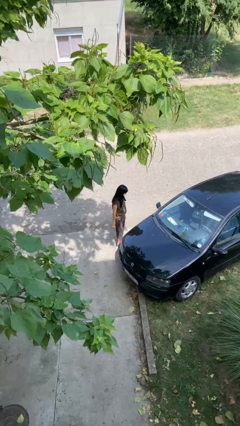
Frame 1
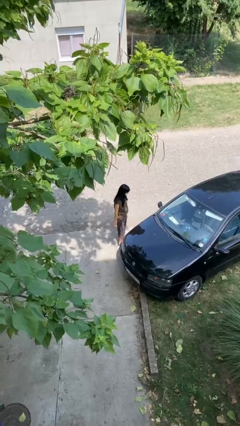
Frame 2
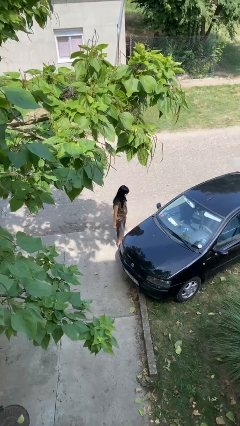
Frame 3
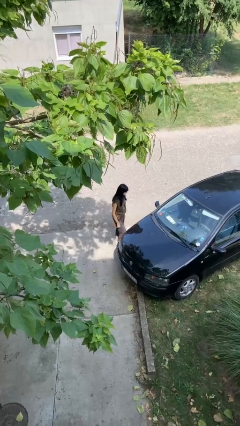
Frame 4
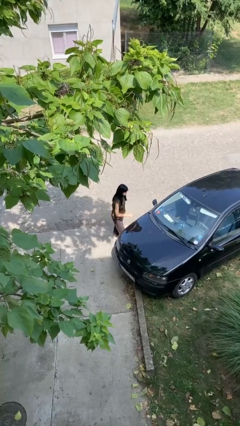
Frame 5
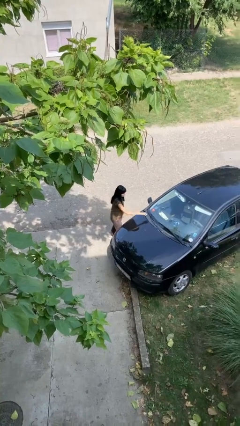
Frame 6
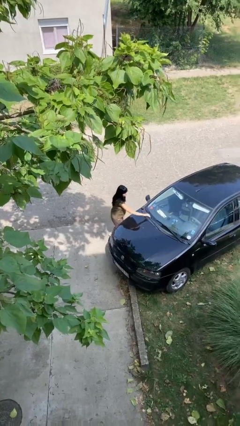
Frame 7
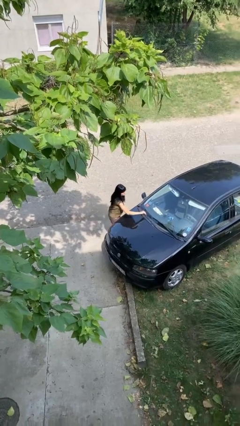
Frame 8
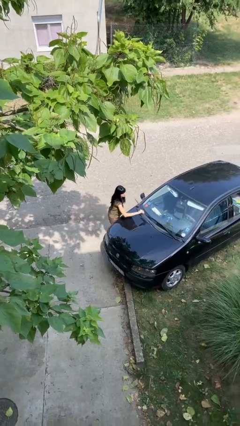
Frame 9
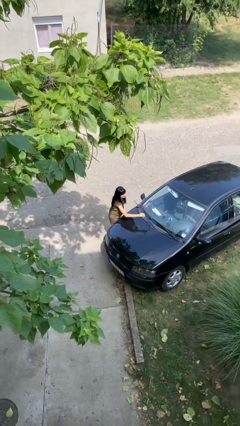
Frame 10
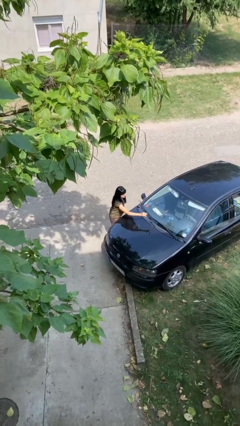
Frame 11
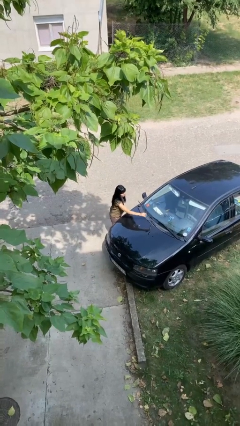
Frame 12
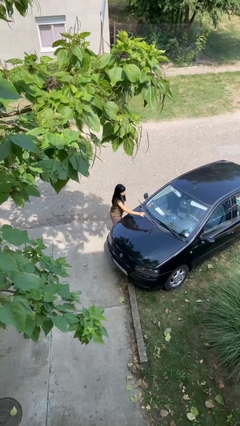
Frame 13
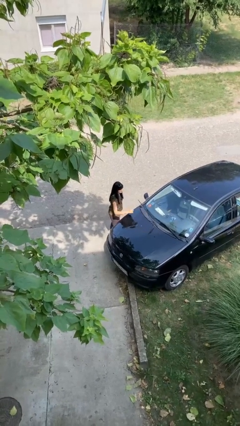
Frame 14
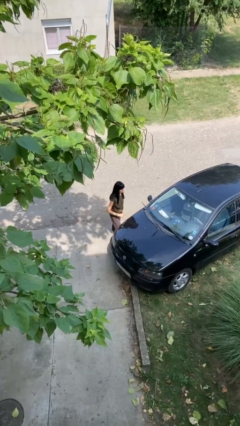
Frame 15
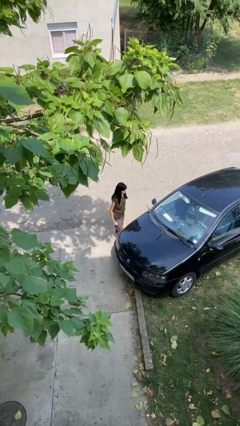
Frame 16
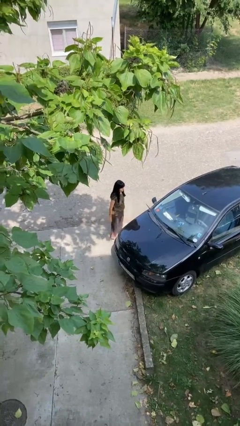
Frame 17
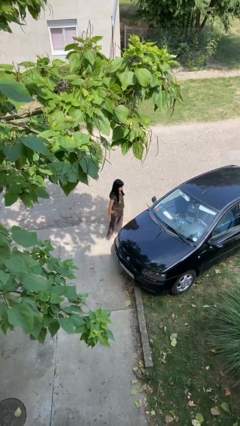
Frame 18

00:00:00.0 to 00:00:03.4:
person flips up car wipers

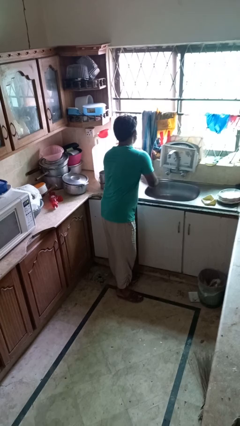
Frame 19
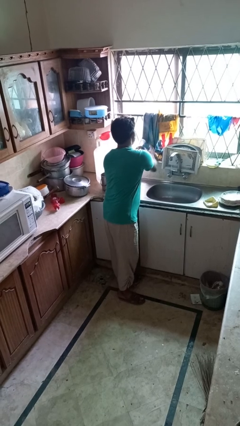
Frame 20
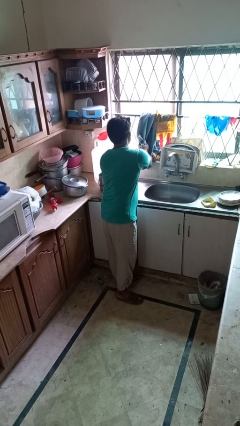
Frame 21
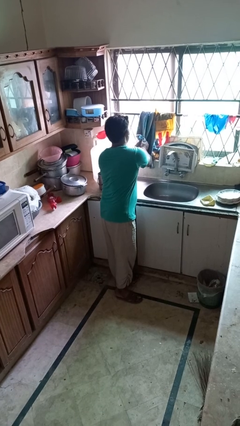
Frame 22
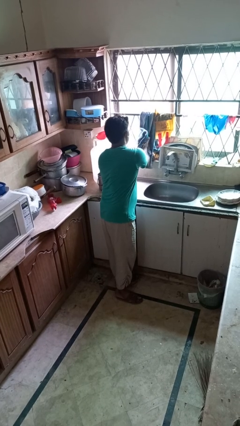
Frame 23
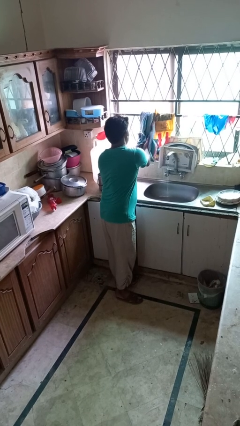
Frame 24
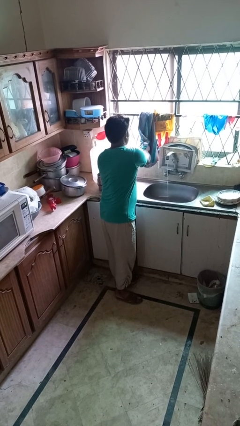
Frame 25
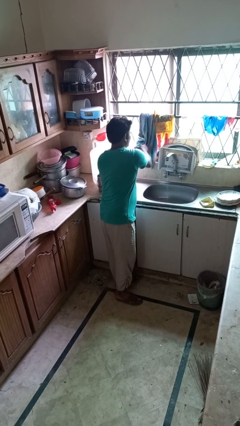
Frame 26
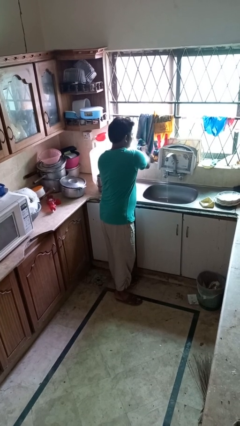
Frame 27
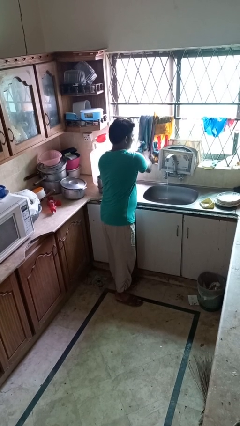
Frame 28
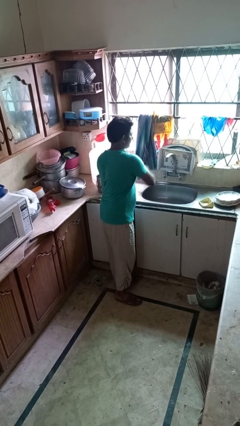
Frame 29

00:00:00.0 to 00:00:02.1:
person dries hands with towel

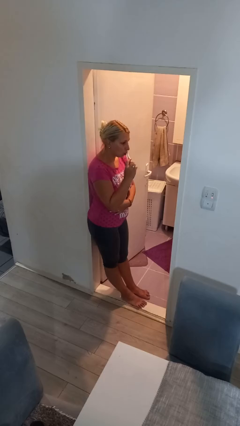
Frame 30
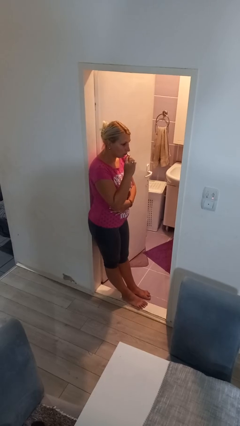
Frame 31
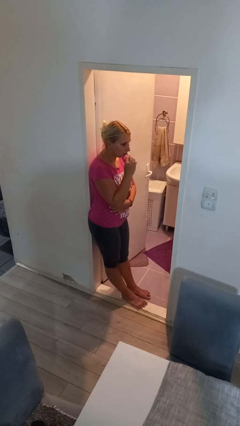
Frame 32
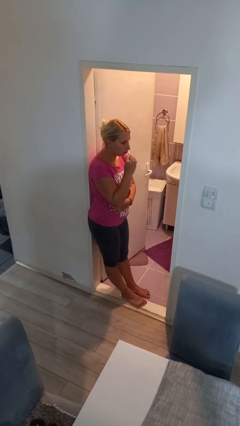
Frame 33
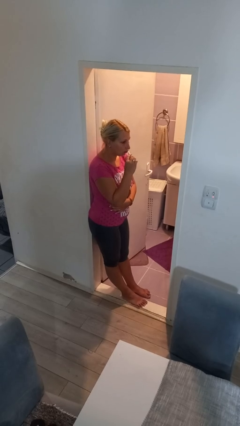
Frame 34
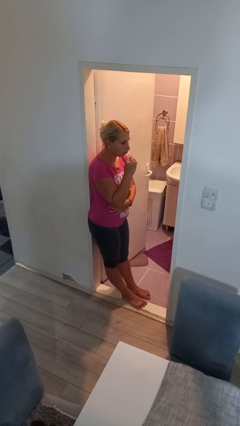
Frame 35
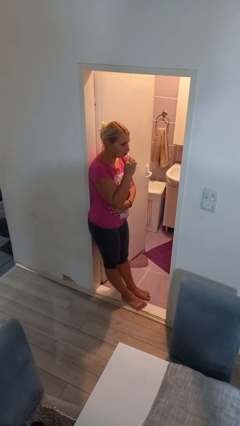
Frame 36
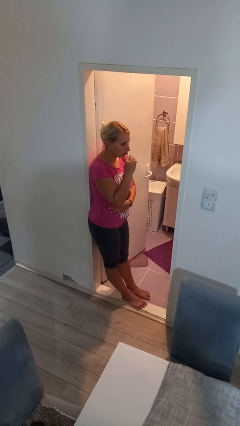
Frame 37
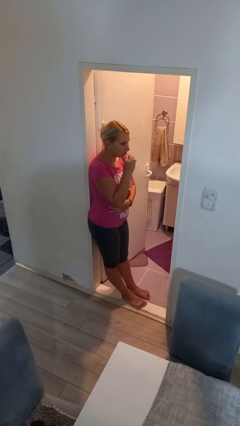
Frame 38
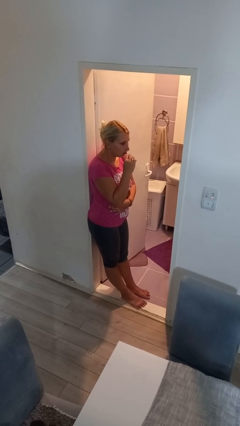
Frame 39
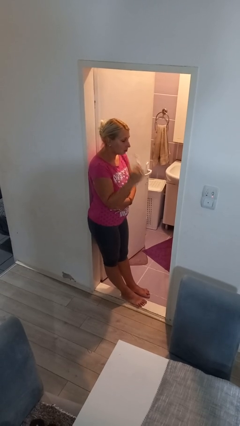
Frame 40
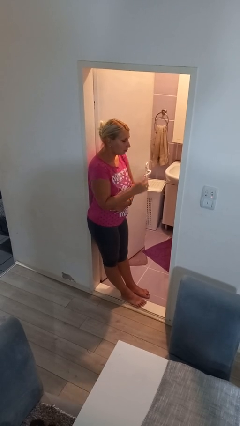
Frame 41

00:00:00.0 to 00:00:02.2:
person brushes teeth

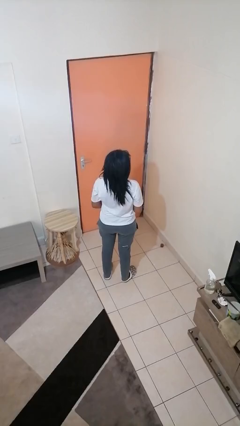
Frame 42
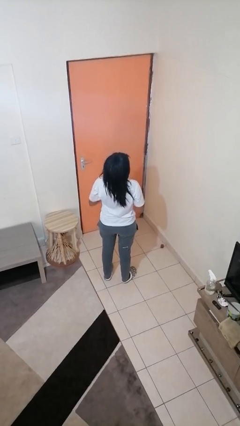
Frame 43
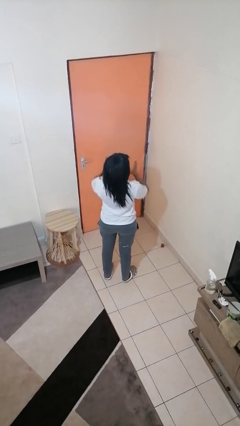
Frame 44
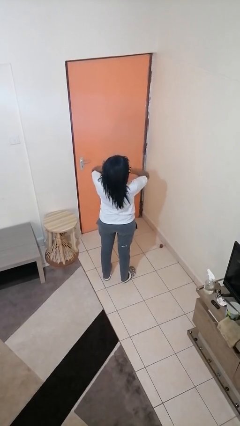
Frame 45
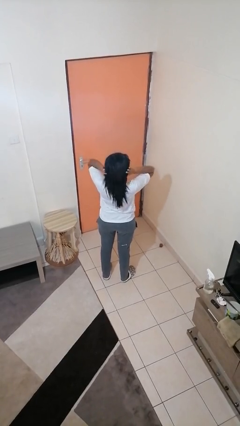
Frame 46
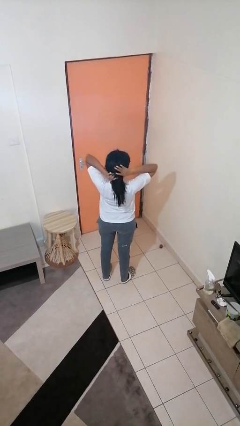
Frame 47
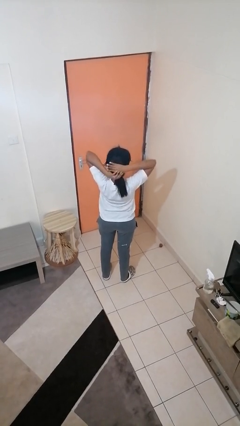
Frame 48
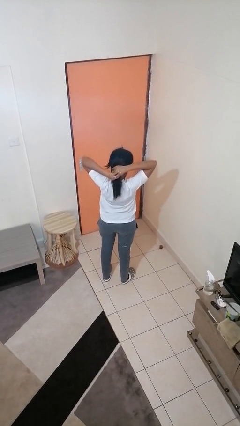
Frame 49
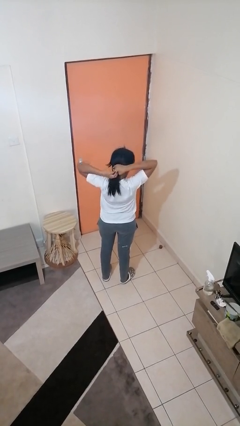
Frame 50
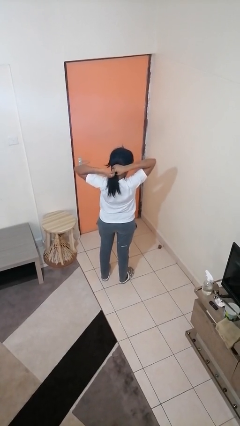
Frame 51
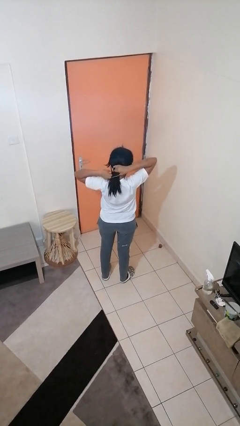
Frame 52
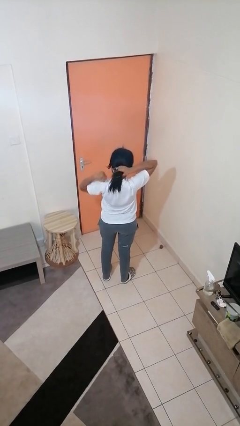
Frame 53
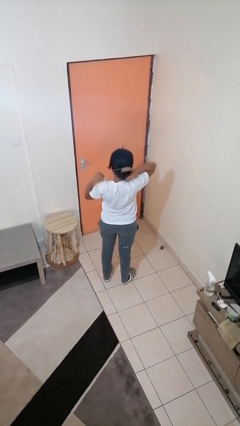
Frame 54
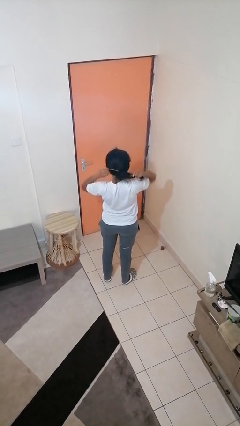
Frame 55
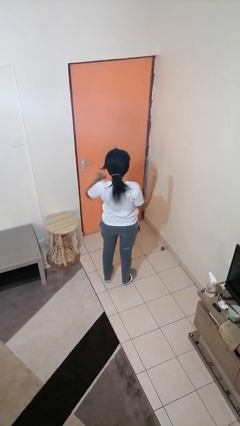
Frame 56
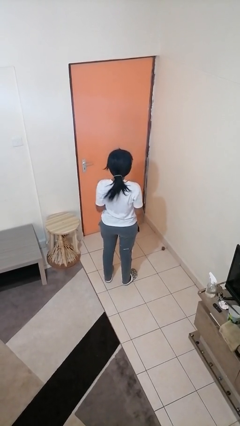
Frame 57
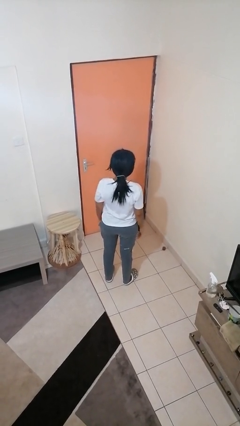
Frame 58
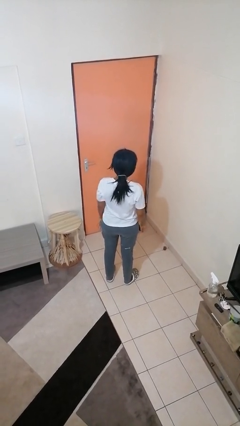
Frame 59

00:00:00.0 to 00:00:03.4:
person puts hair in ponytail

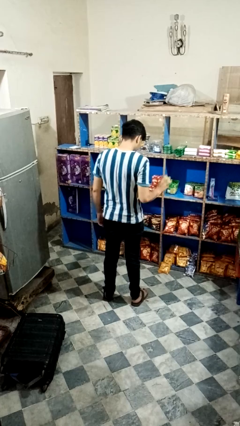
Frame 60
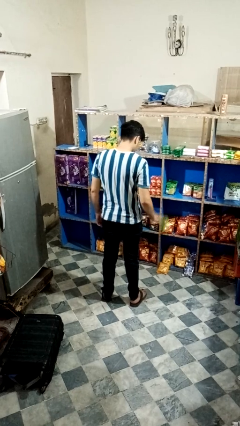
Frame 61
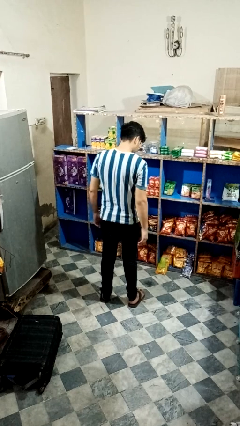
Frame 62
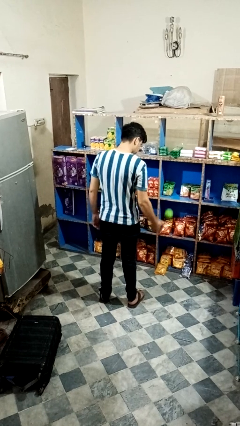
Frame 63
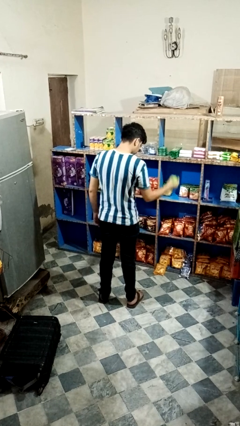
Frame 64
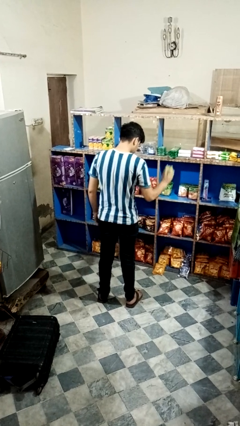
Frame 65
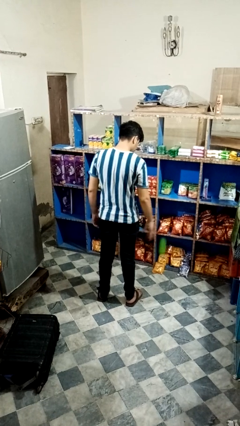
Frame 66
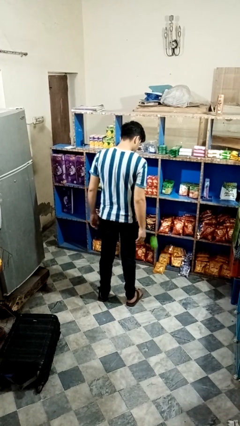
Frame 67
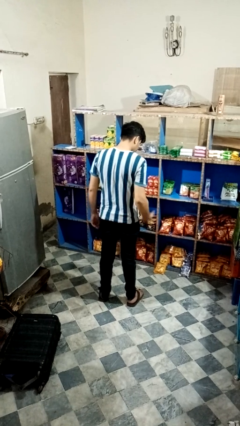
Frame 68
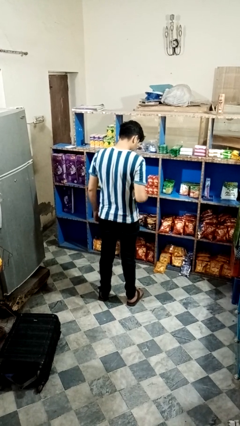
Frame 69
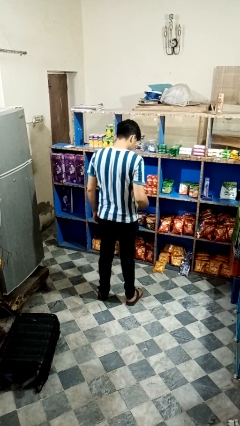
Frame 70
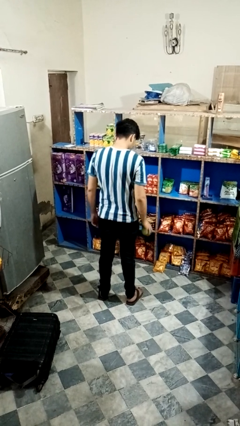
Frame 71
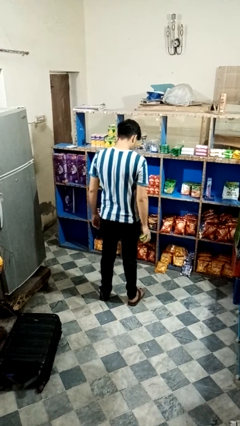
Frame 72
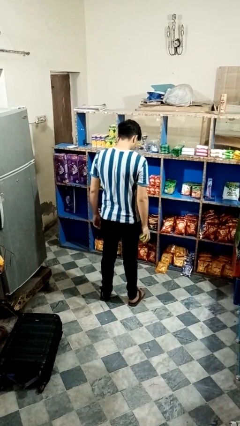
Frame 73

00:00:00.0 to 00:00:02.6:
person bounces ball on floor

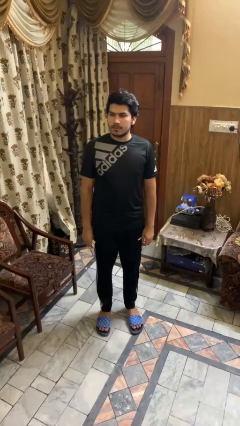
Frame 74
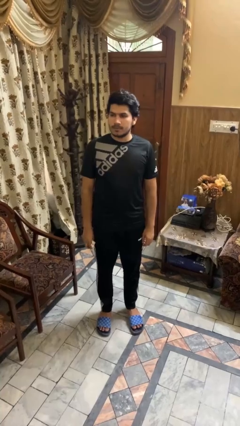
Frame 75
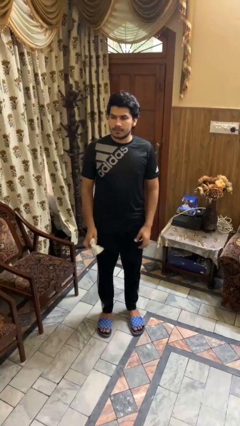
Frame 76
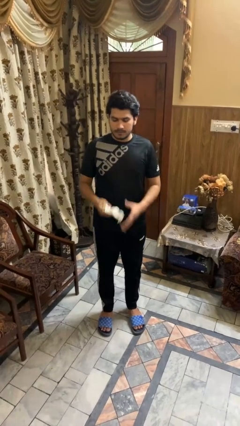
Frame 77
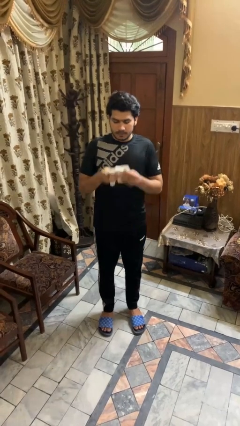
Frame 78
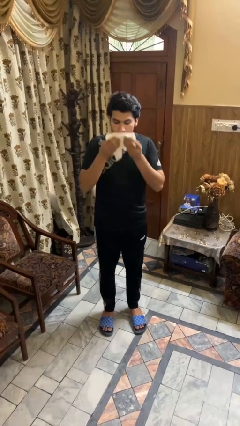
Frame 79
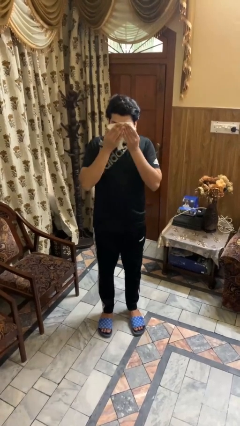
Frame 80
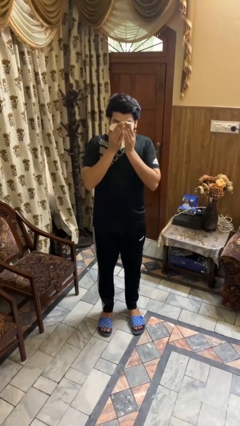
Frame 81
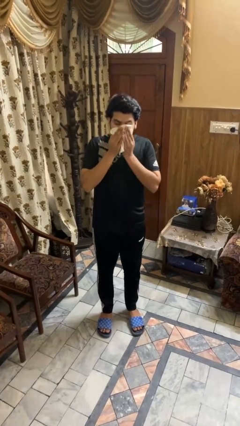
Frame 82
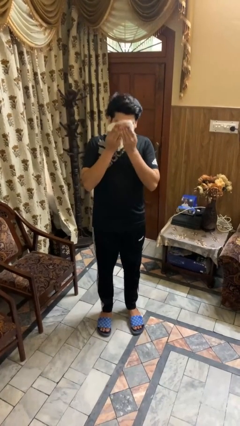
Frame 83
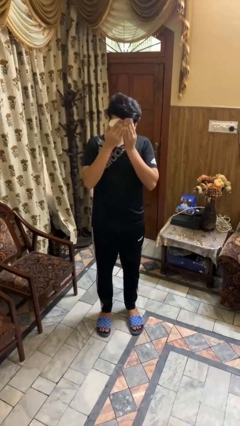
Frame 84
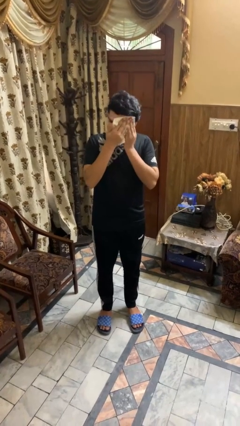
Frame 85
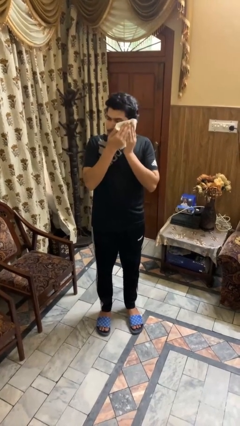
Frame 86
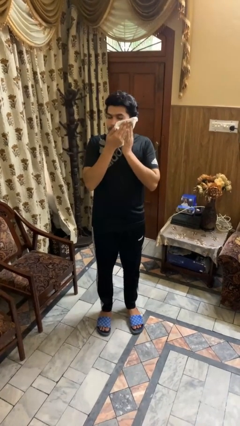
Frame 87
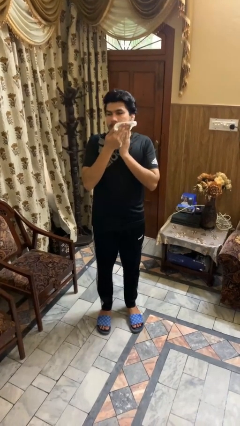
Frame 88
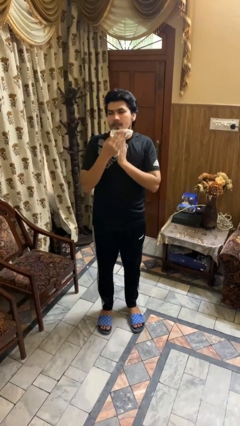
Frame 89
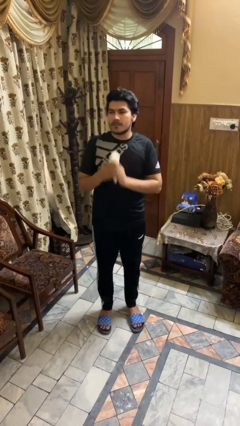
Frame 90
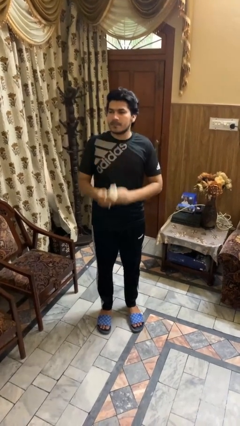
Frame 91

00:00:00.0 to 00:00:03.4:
person wipes mouth with napkin

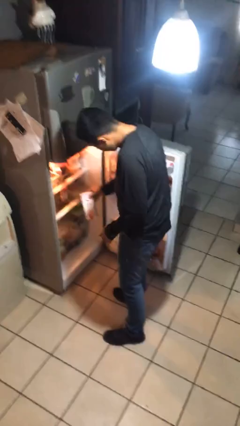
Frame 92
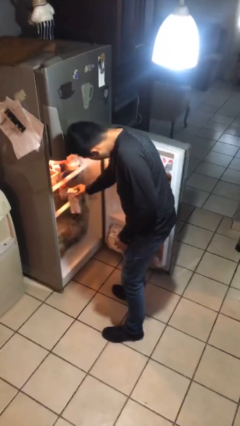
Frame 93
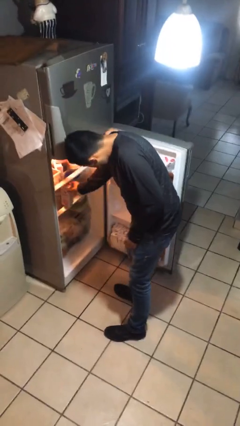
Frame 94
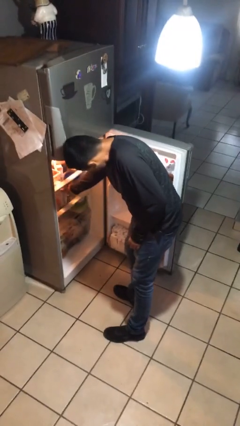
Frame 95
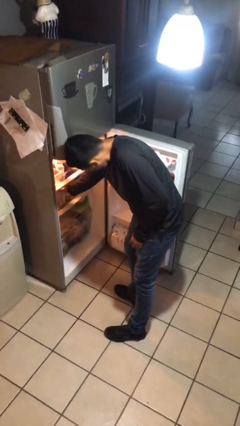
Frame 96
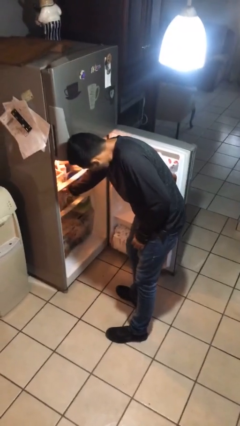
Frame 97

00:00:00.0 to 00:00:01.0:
person takes object from refrigerator
